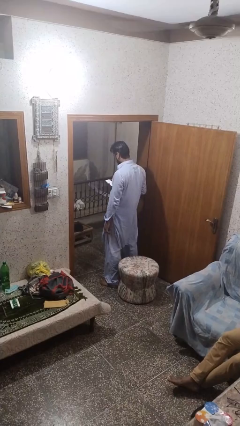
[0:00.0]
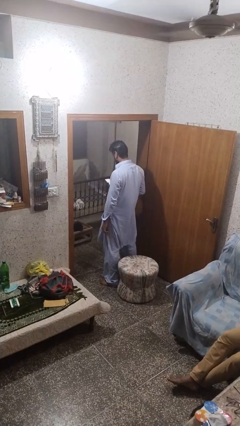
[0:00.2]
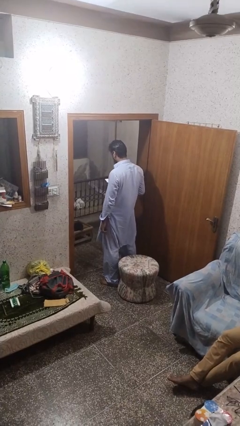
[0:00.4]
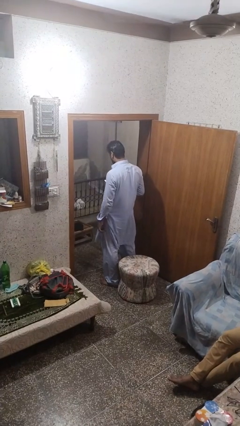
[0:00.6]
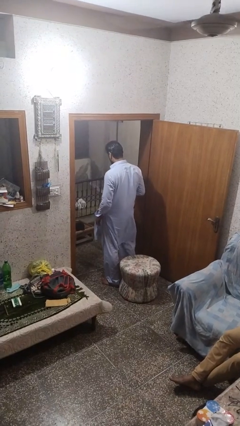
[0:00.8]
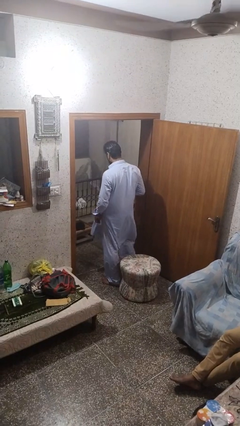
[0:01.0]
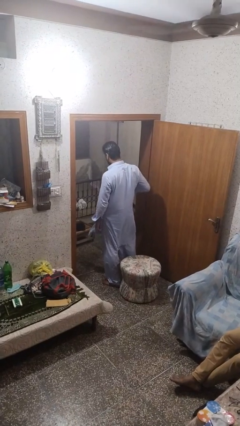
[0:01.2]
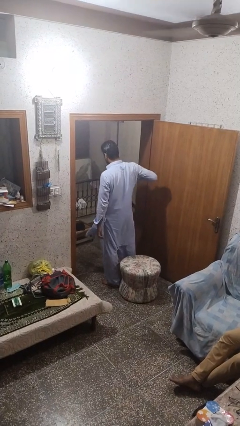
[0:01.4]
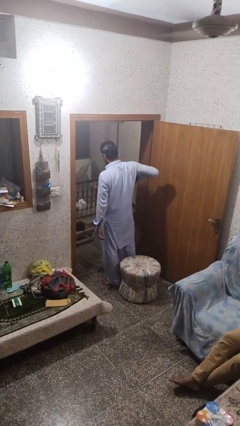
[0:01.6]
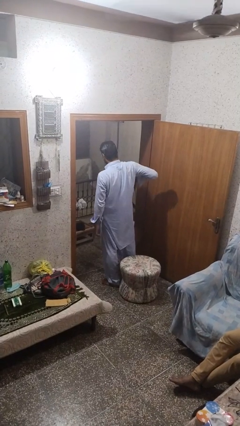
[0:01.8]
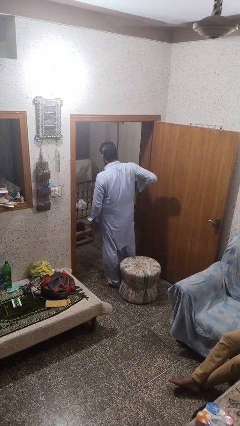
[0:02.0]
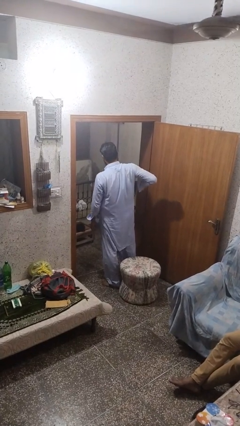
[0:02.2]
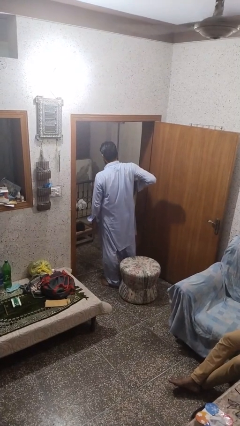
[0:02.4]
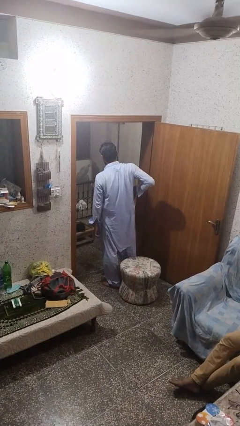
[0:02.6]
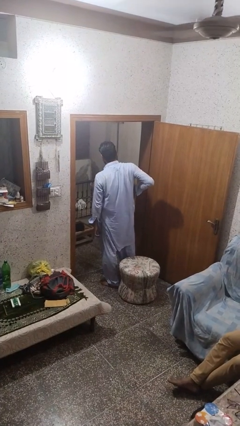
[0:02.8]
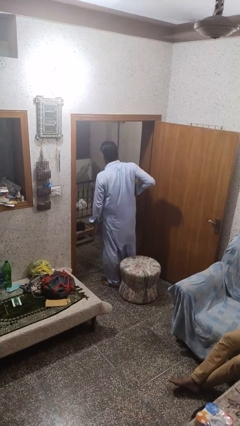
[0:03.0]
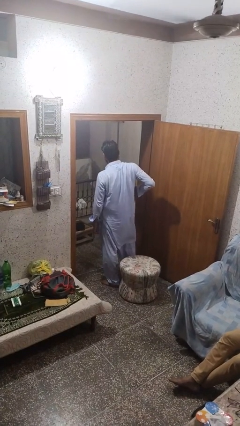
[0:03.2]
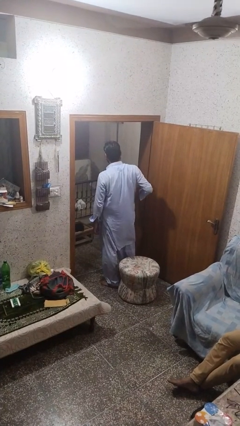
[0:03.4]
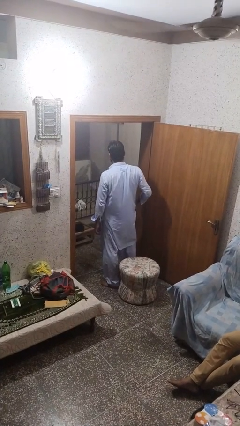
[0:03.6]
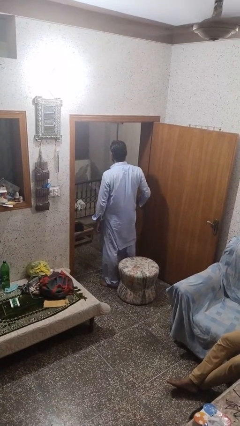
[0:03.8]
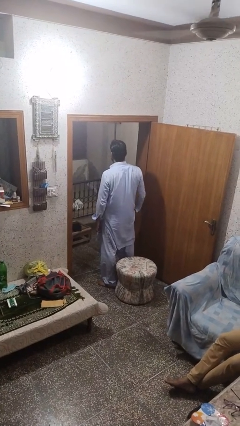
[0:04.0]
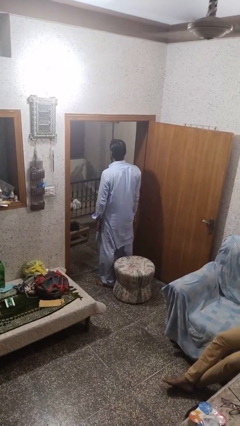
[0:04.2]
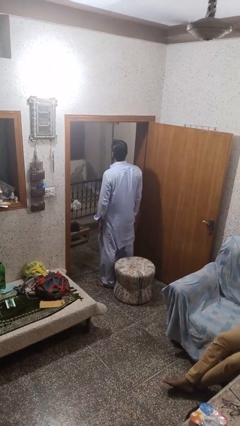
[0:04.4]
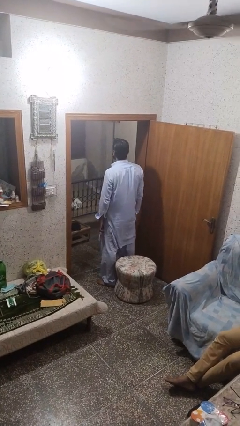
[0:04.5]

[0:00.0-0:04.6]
person puts phone into pocket

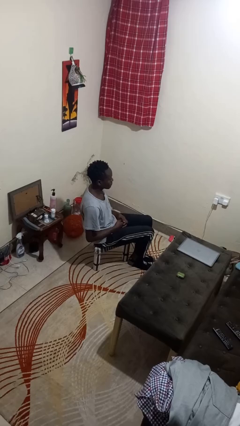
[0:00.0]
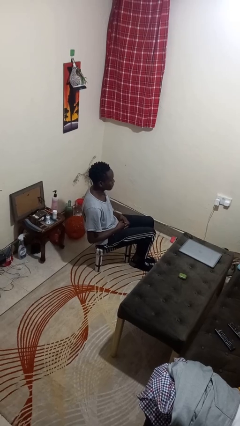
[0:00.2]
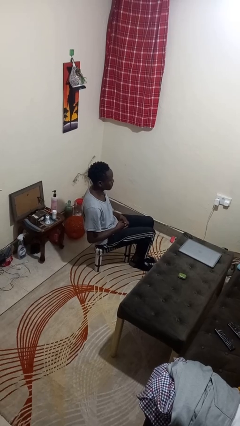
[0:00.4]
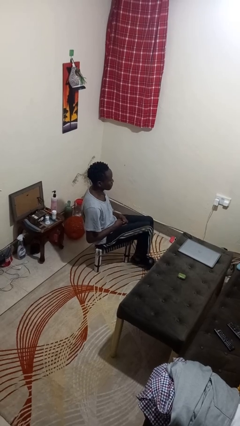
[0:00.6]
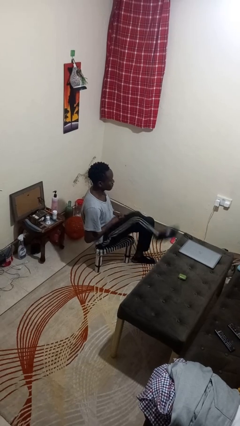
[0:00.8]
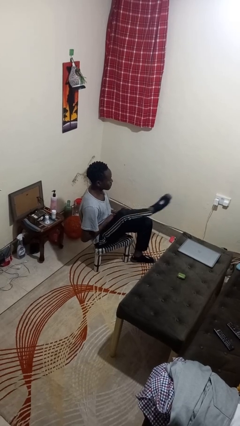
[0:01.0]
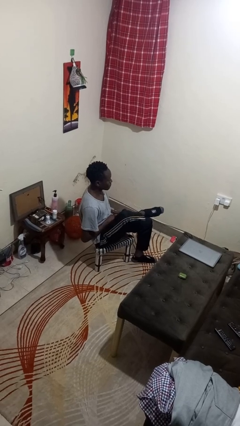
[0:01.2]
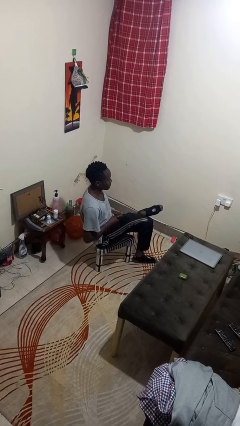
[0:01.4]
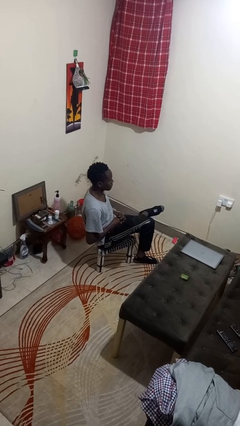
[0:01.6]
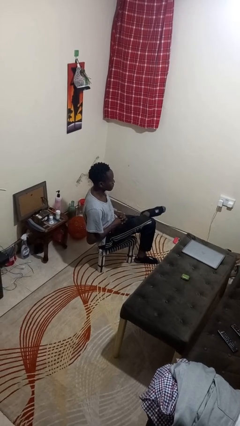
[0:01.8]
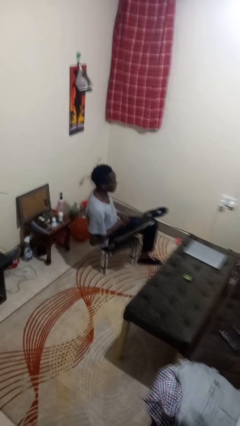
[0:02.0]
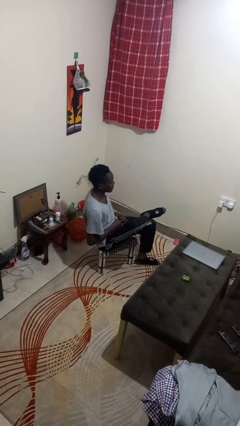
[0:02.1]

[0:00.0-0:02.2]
person crosses legs

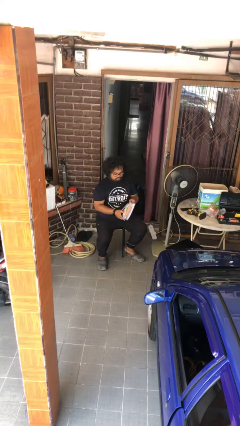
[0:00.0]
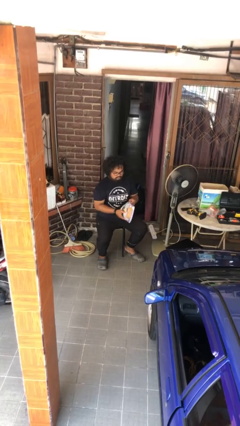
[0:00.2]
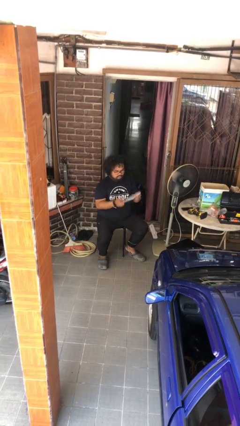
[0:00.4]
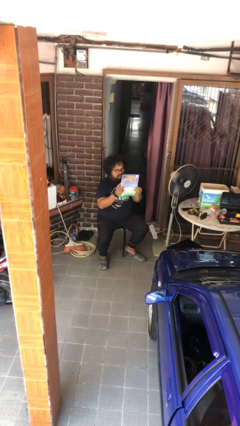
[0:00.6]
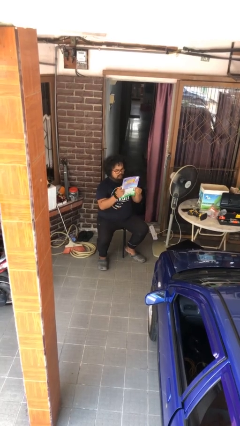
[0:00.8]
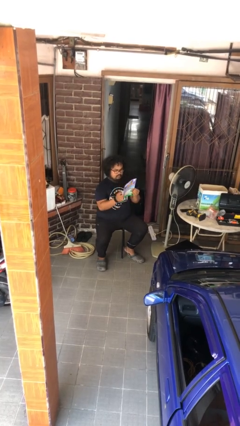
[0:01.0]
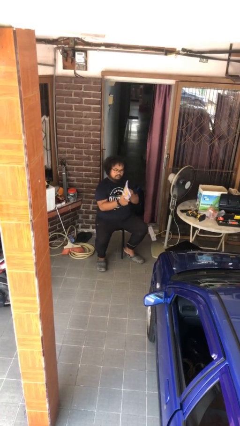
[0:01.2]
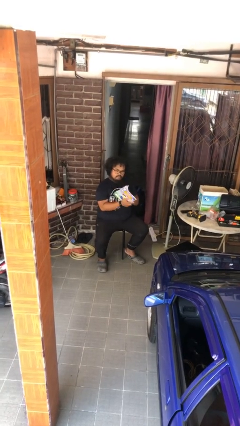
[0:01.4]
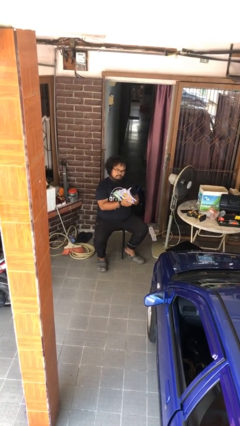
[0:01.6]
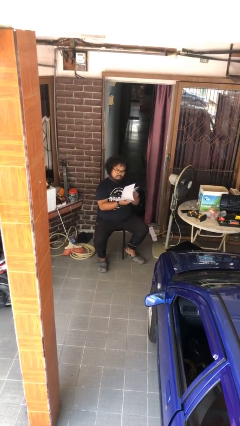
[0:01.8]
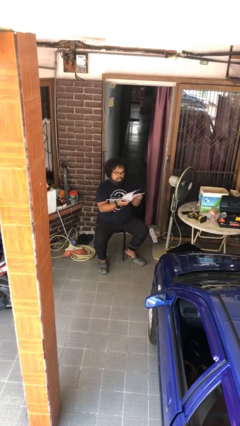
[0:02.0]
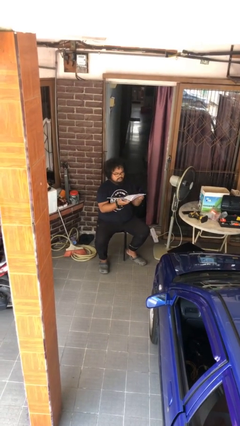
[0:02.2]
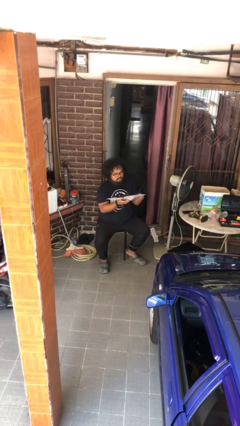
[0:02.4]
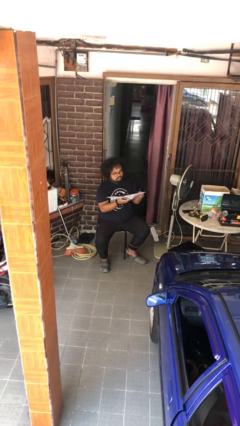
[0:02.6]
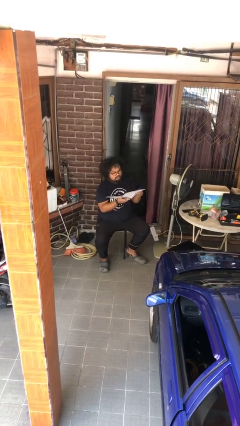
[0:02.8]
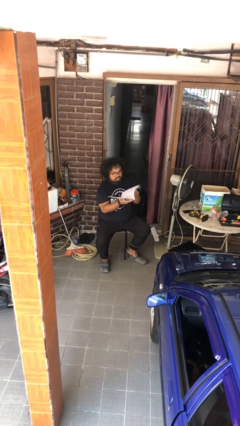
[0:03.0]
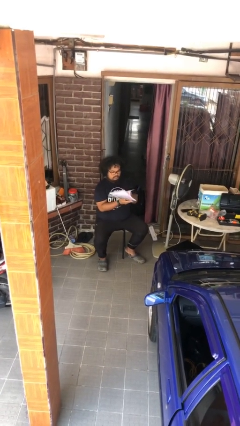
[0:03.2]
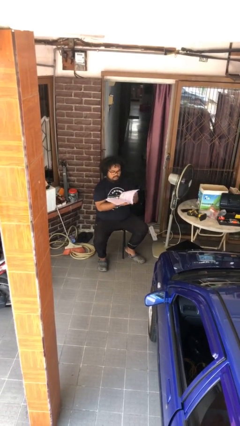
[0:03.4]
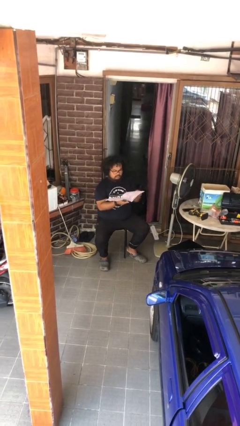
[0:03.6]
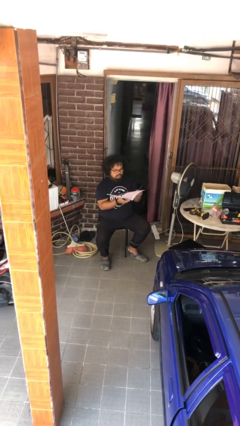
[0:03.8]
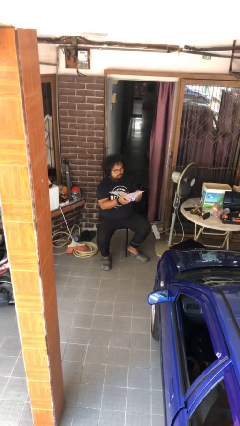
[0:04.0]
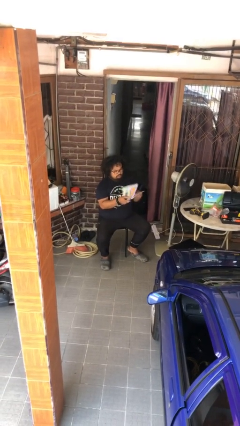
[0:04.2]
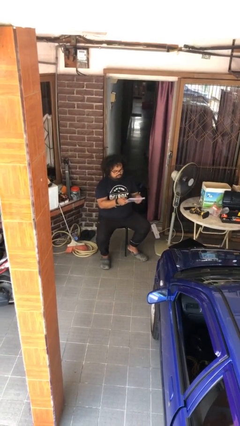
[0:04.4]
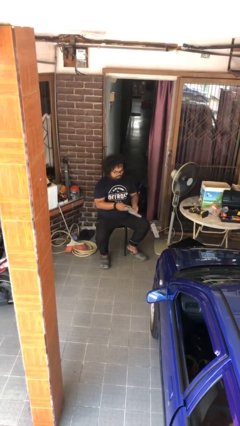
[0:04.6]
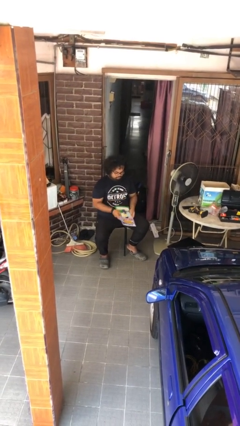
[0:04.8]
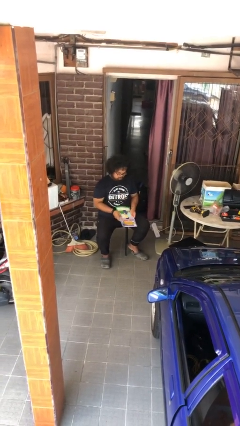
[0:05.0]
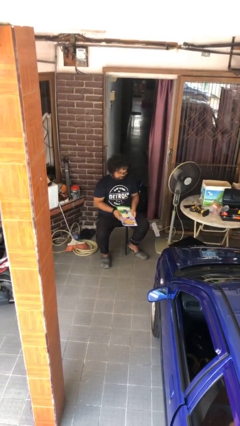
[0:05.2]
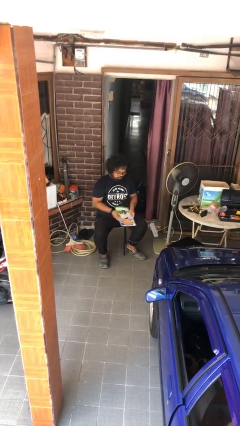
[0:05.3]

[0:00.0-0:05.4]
person reads document

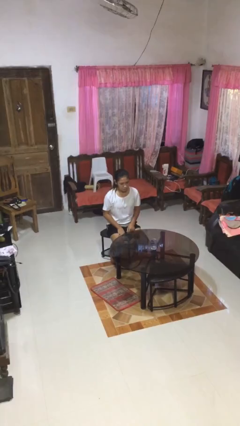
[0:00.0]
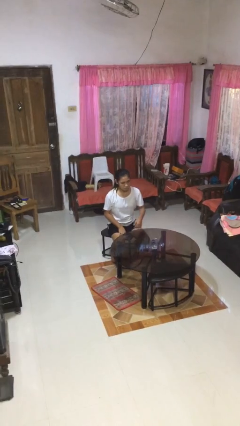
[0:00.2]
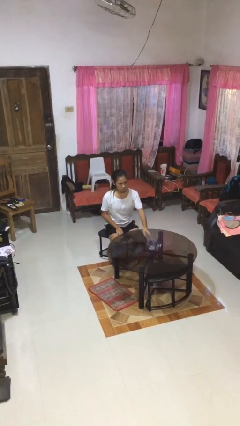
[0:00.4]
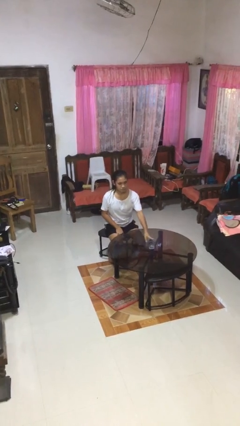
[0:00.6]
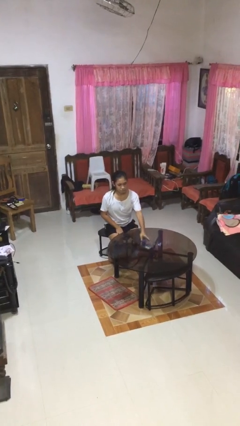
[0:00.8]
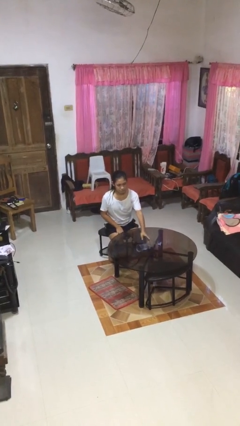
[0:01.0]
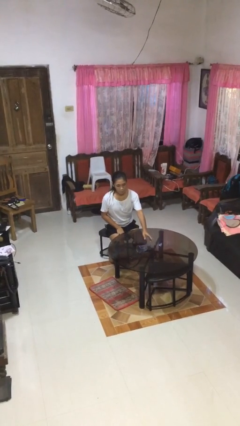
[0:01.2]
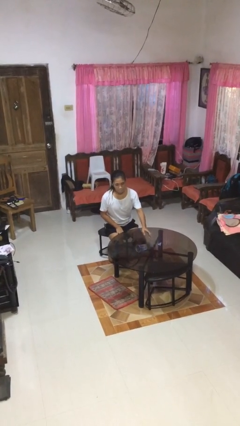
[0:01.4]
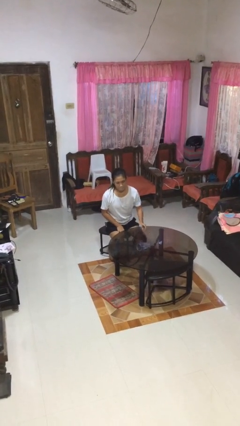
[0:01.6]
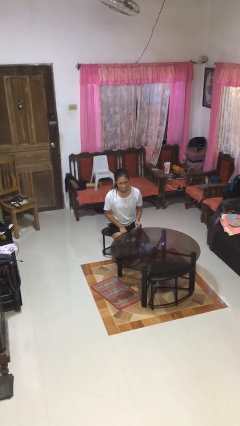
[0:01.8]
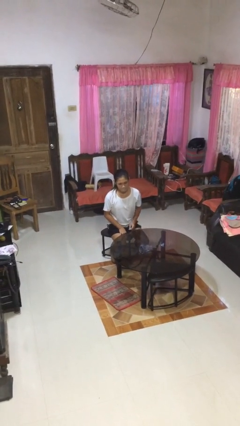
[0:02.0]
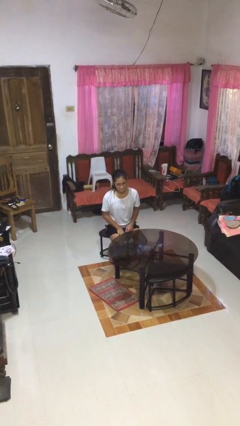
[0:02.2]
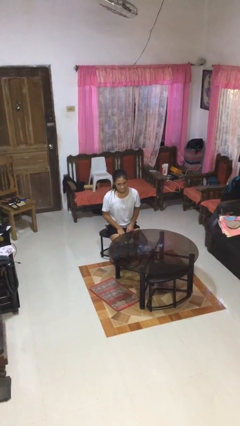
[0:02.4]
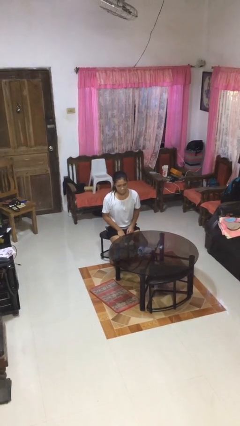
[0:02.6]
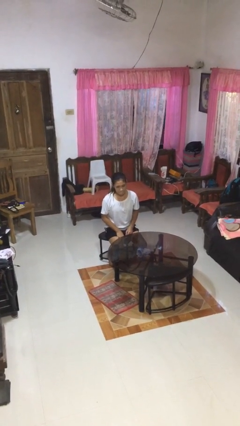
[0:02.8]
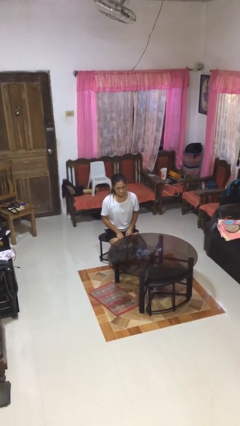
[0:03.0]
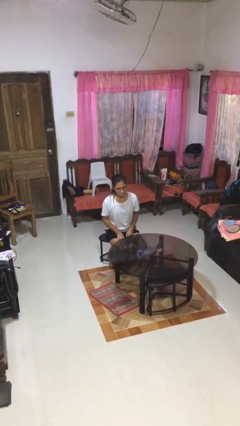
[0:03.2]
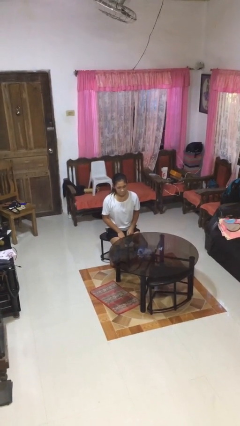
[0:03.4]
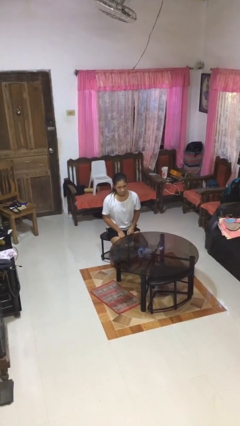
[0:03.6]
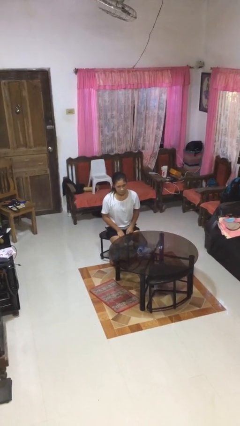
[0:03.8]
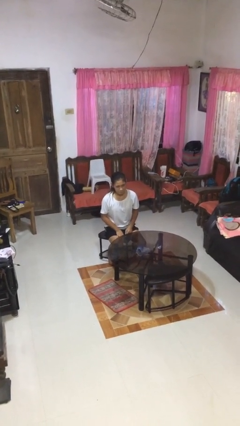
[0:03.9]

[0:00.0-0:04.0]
person spills on table

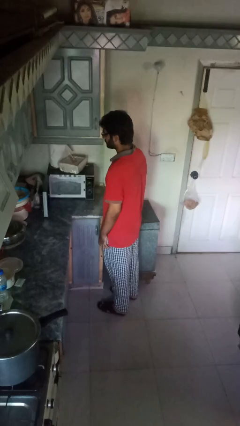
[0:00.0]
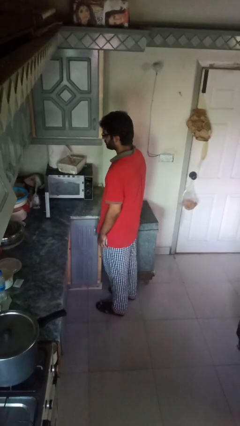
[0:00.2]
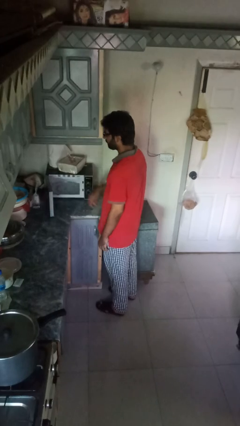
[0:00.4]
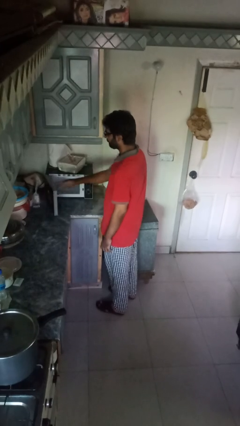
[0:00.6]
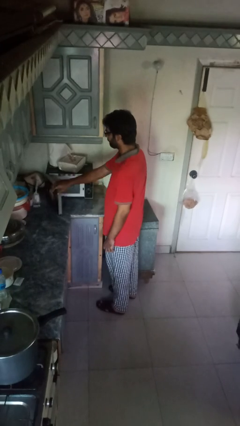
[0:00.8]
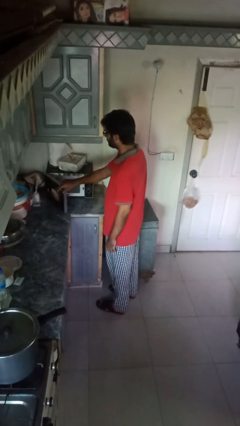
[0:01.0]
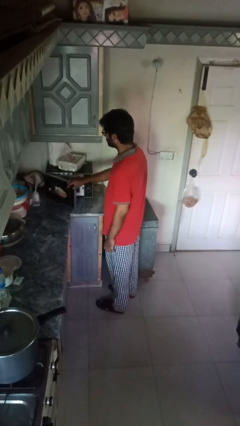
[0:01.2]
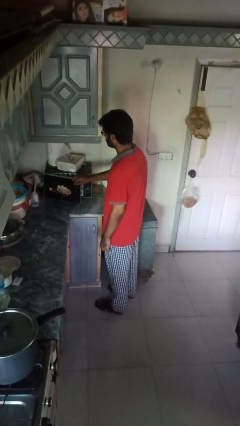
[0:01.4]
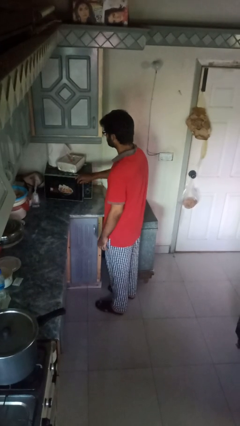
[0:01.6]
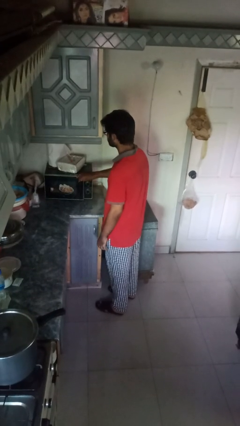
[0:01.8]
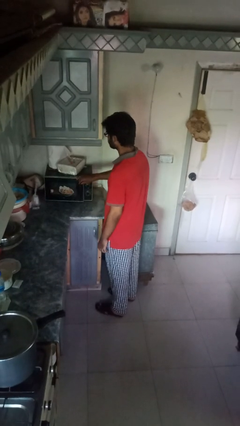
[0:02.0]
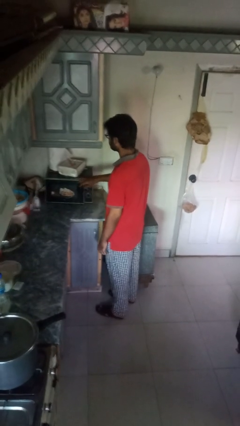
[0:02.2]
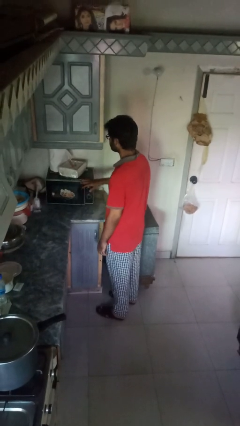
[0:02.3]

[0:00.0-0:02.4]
person closes oven door
